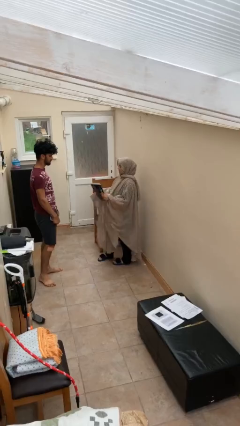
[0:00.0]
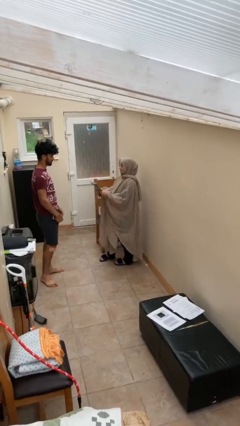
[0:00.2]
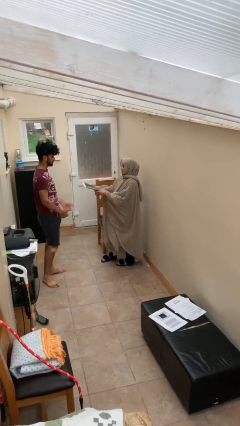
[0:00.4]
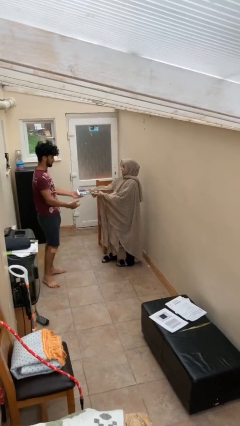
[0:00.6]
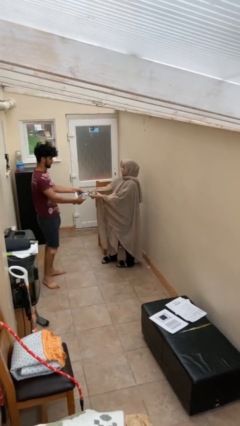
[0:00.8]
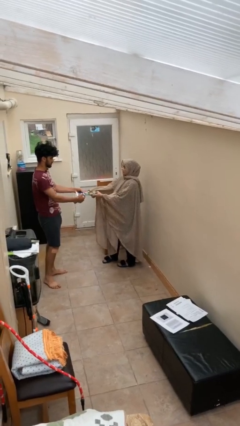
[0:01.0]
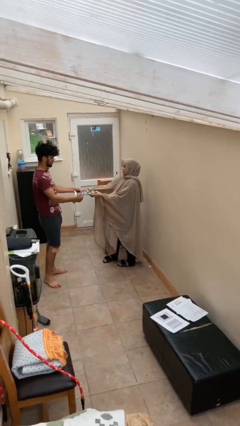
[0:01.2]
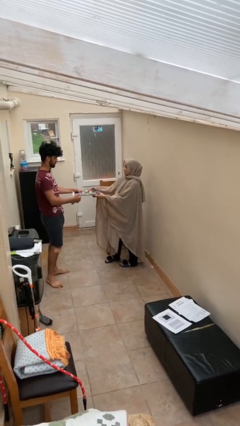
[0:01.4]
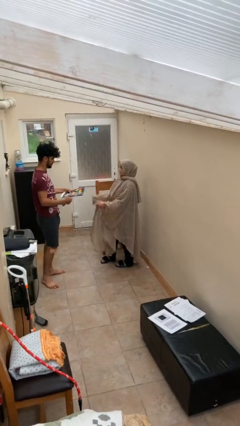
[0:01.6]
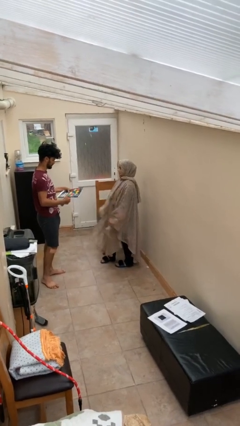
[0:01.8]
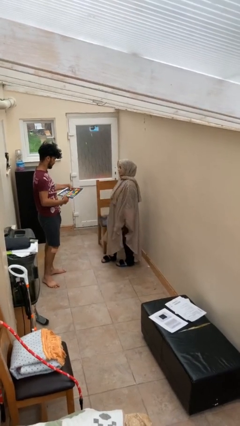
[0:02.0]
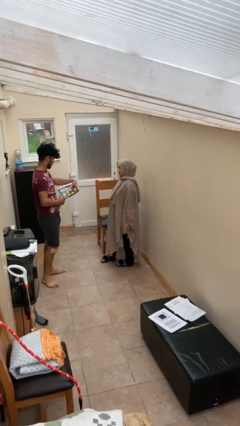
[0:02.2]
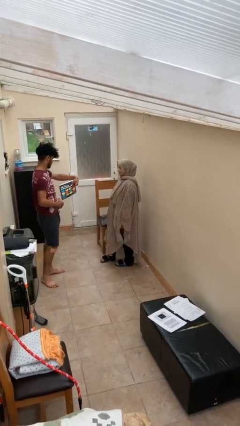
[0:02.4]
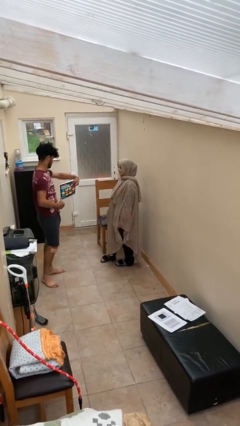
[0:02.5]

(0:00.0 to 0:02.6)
person transfers object to person

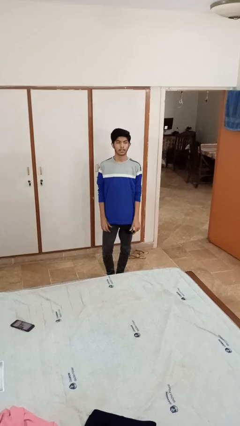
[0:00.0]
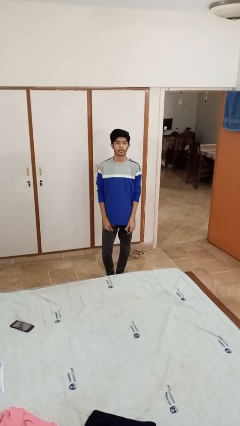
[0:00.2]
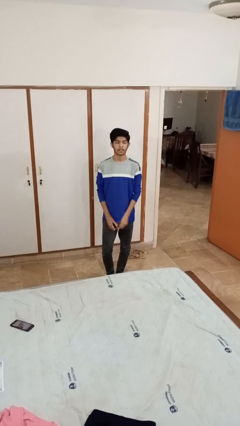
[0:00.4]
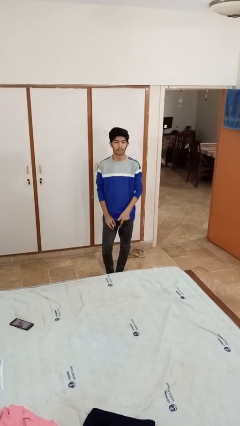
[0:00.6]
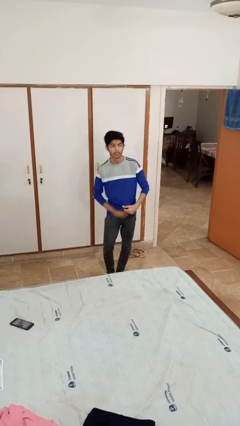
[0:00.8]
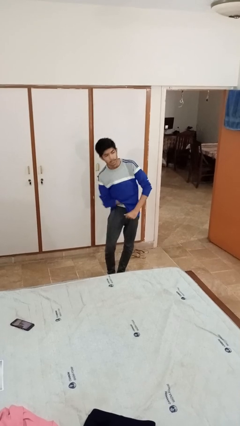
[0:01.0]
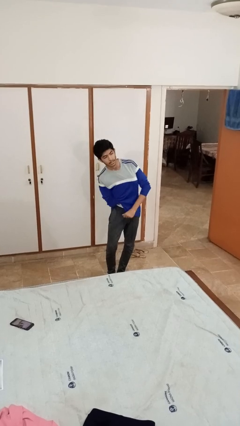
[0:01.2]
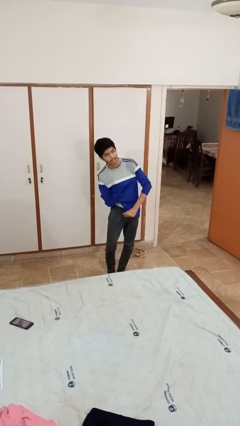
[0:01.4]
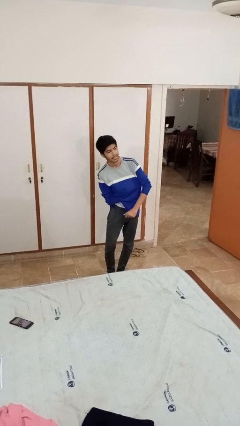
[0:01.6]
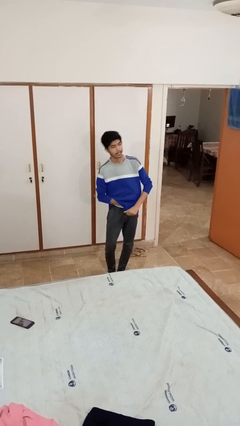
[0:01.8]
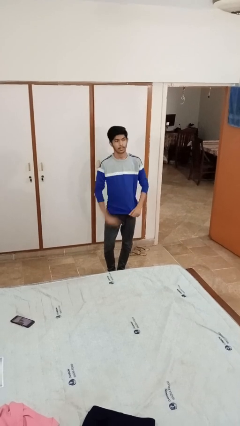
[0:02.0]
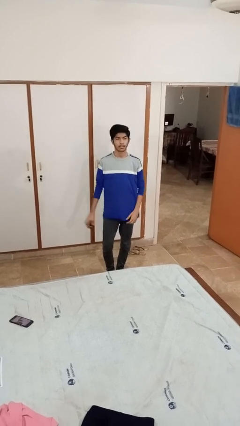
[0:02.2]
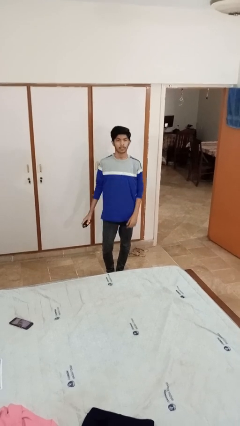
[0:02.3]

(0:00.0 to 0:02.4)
person applies deodorant

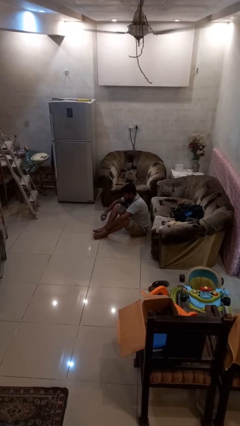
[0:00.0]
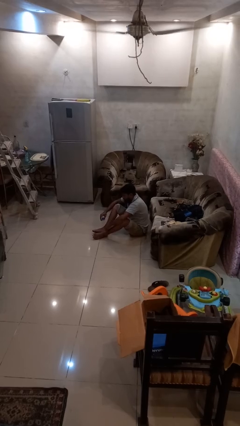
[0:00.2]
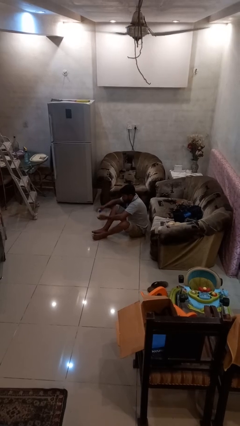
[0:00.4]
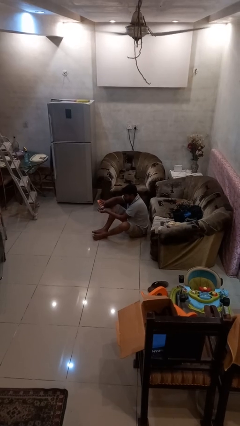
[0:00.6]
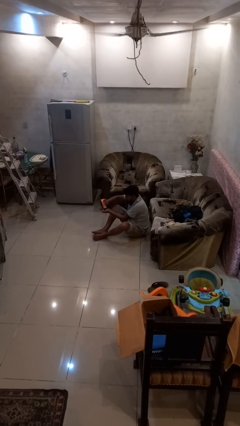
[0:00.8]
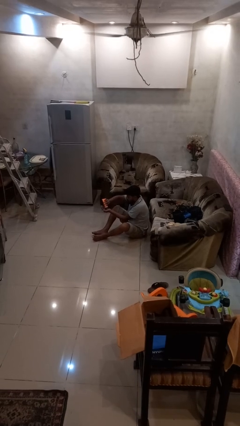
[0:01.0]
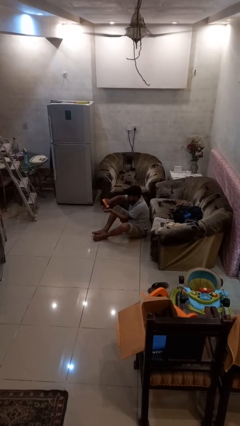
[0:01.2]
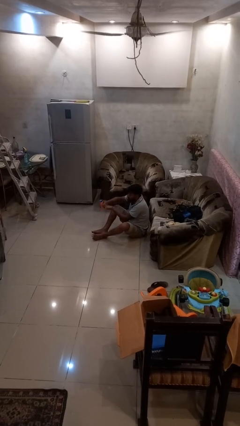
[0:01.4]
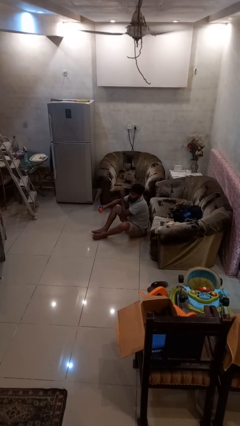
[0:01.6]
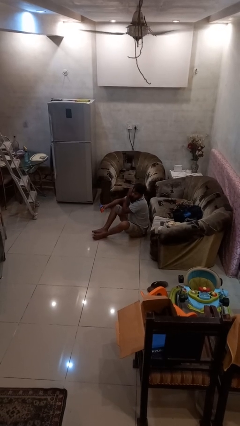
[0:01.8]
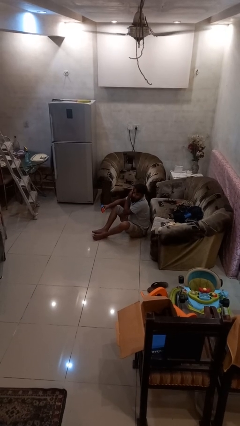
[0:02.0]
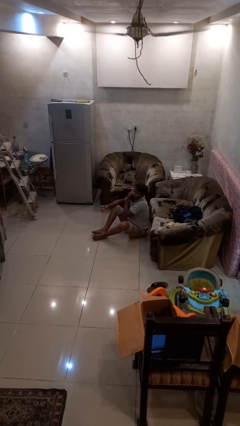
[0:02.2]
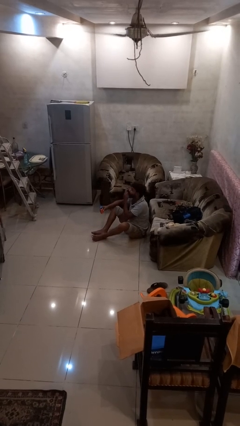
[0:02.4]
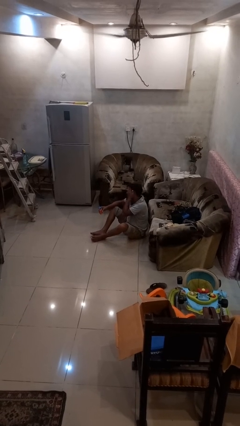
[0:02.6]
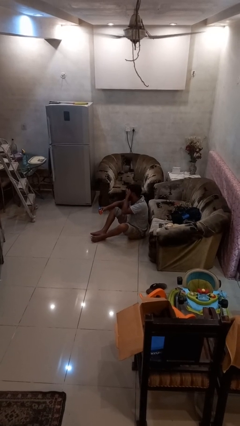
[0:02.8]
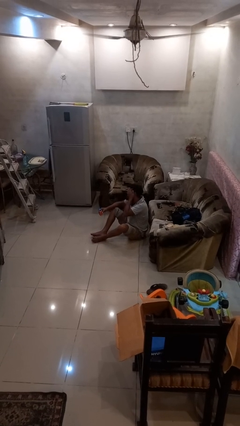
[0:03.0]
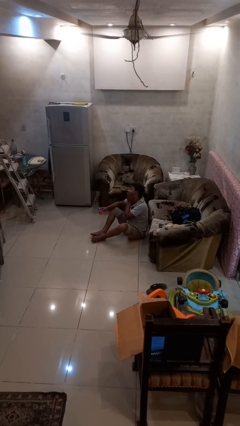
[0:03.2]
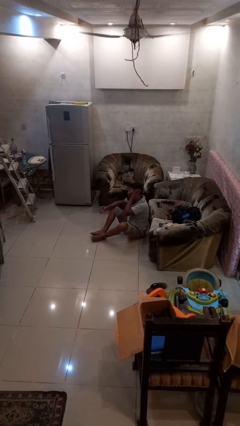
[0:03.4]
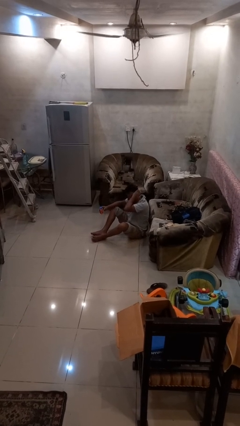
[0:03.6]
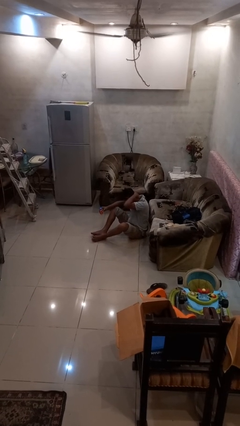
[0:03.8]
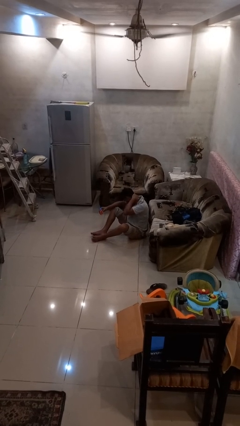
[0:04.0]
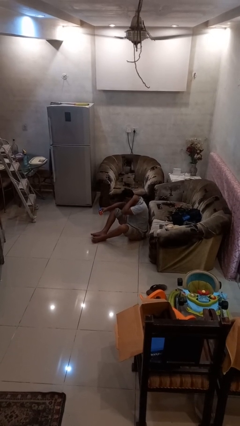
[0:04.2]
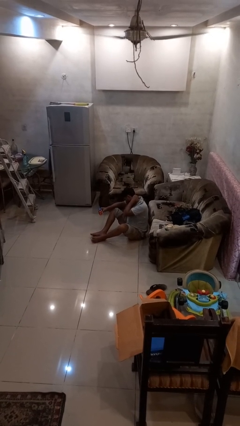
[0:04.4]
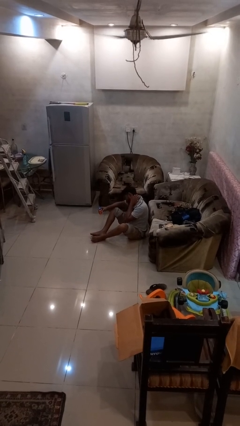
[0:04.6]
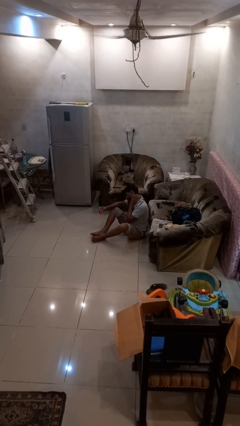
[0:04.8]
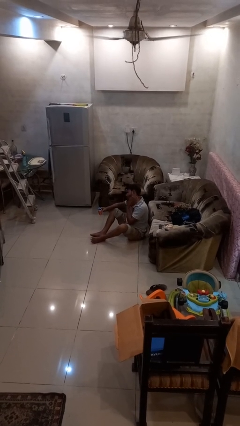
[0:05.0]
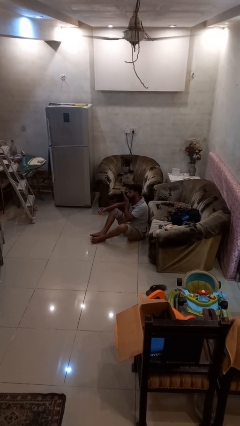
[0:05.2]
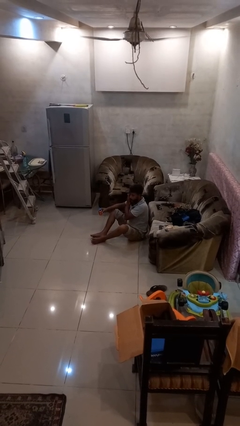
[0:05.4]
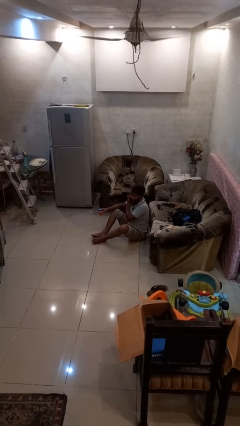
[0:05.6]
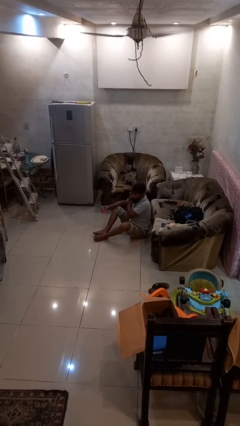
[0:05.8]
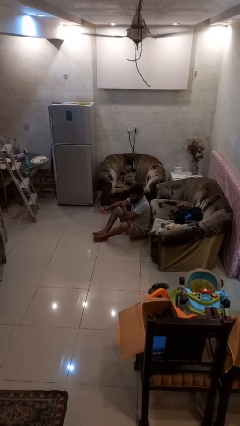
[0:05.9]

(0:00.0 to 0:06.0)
person applies sunscreen

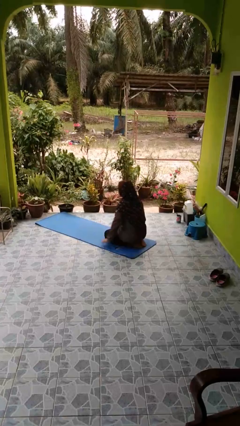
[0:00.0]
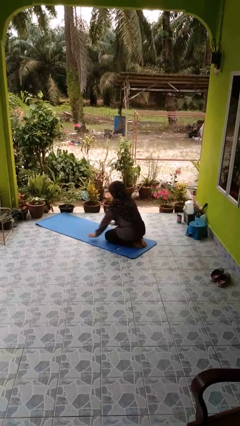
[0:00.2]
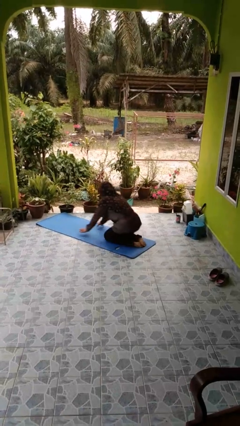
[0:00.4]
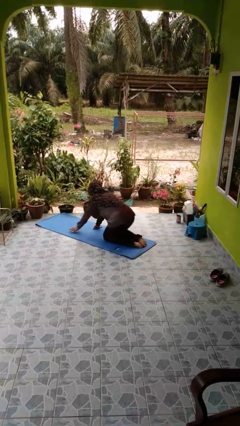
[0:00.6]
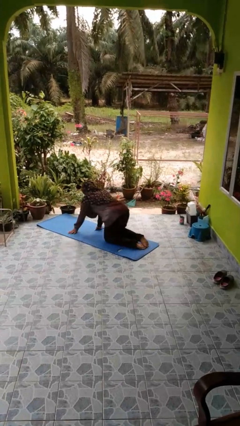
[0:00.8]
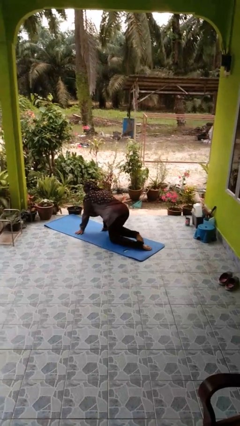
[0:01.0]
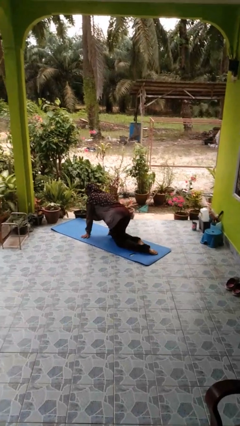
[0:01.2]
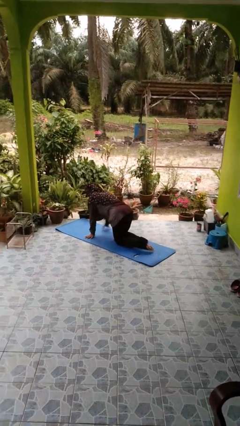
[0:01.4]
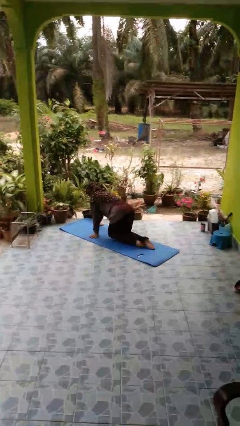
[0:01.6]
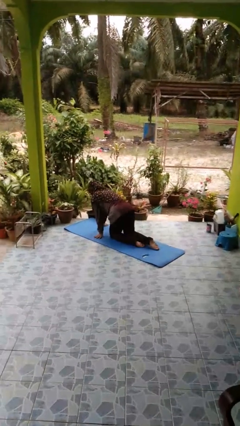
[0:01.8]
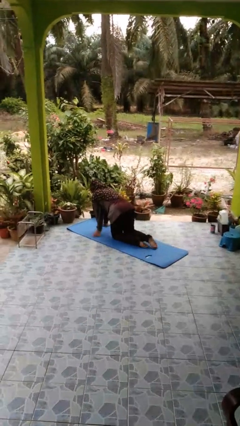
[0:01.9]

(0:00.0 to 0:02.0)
person crawls

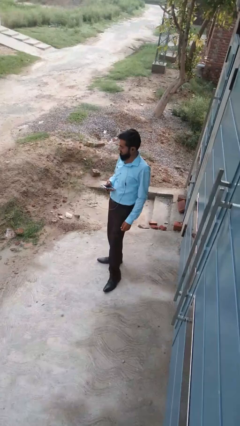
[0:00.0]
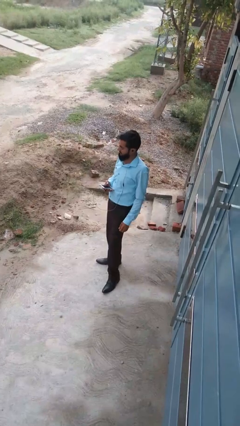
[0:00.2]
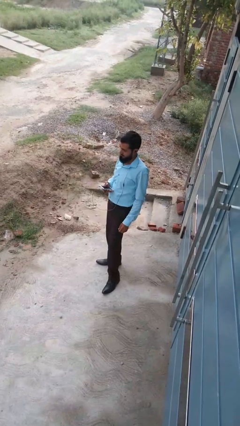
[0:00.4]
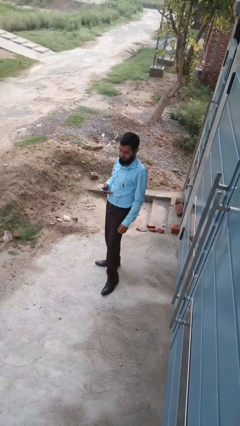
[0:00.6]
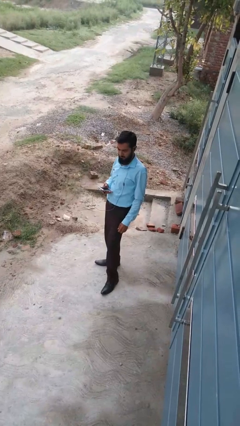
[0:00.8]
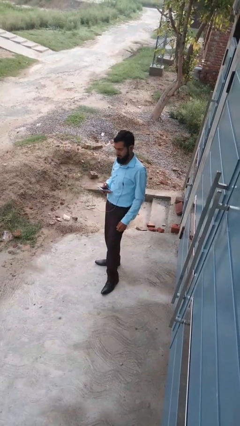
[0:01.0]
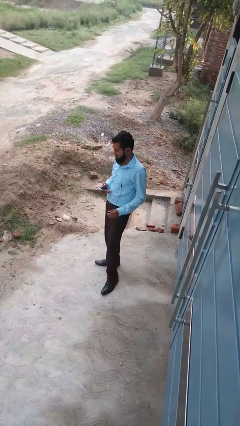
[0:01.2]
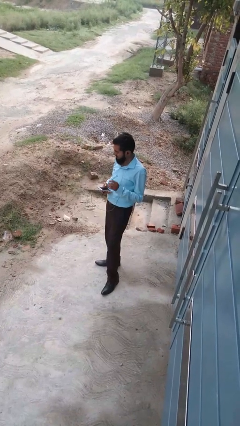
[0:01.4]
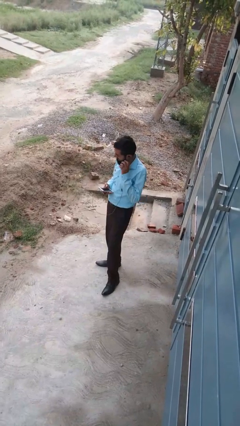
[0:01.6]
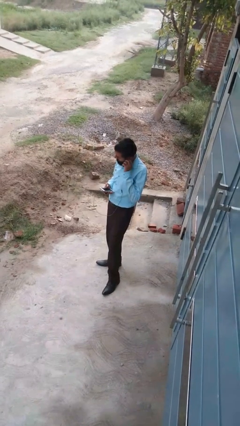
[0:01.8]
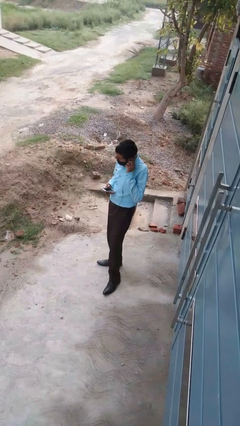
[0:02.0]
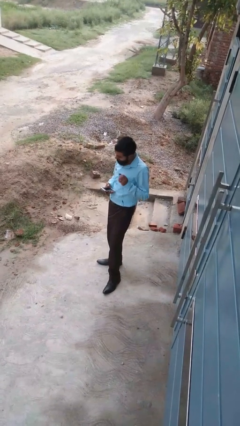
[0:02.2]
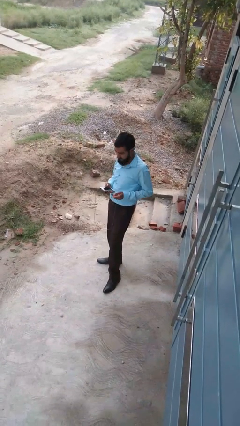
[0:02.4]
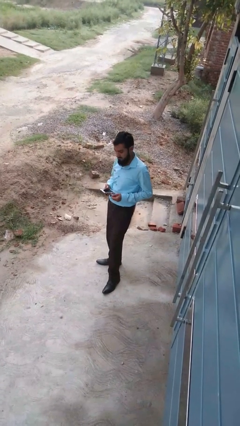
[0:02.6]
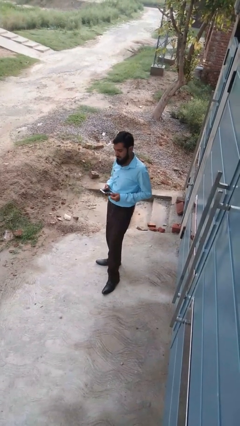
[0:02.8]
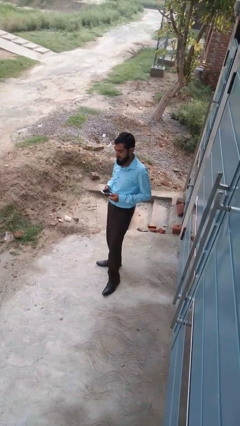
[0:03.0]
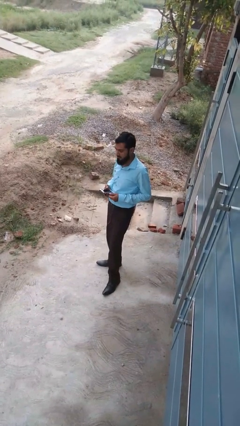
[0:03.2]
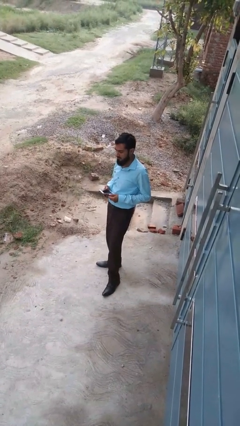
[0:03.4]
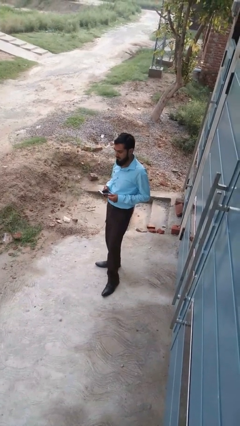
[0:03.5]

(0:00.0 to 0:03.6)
person takes off headphones

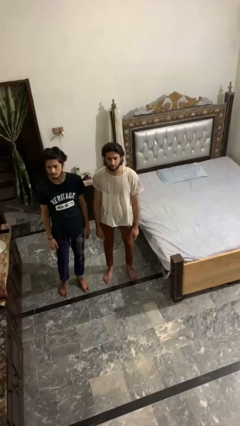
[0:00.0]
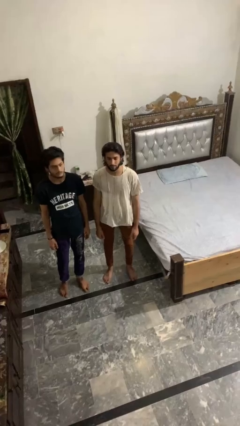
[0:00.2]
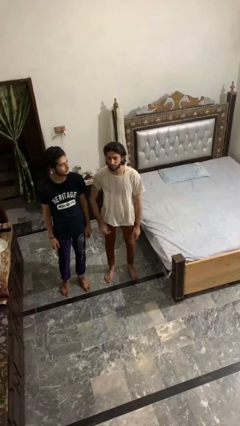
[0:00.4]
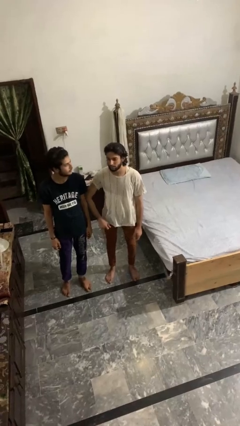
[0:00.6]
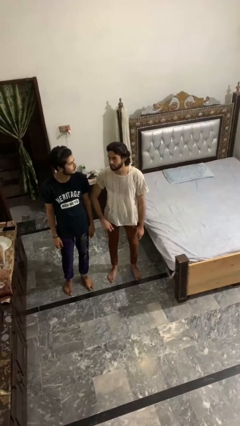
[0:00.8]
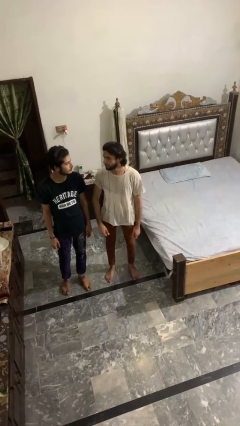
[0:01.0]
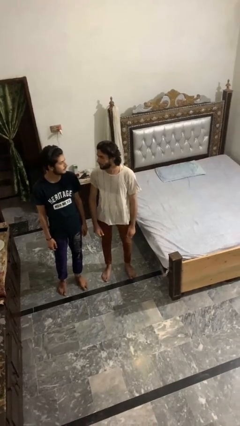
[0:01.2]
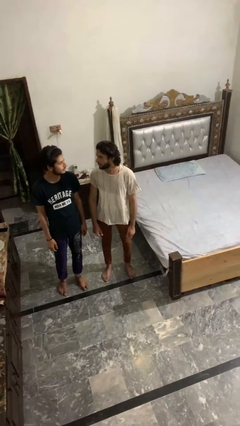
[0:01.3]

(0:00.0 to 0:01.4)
person nudges person with elbow
